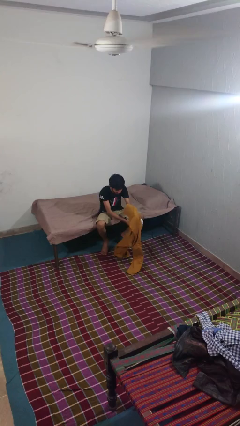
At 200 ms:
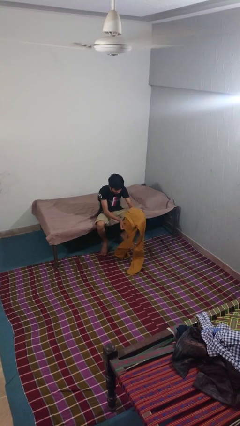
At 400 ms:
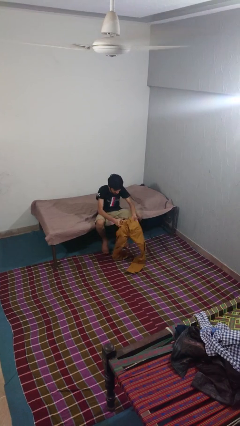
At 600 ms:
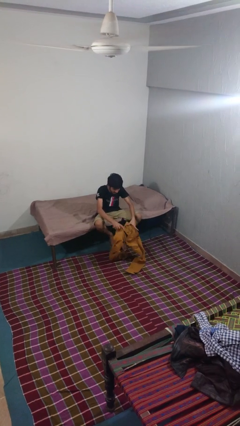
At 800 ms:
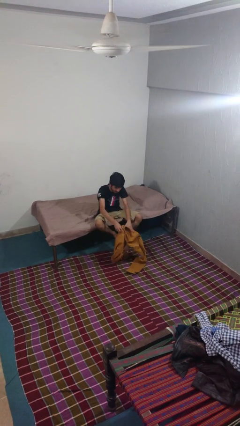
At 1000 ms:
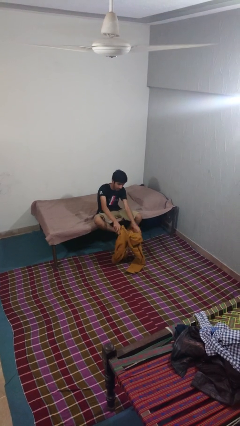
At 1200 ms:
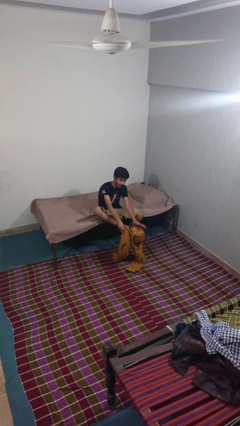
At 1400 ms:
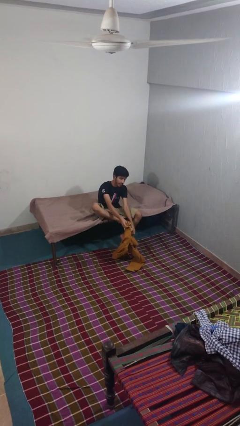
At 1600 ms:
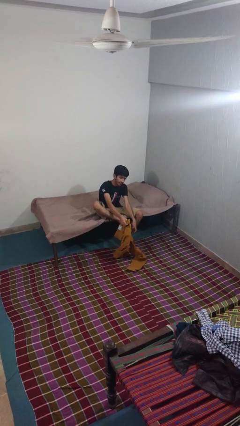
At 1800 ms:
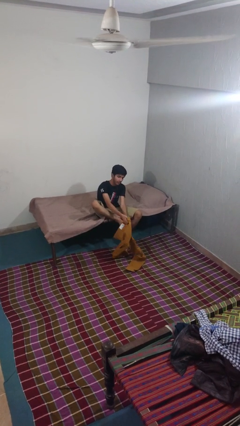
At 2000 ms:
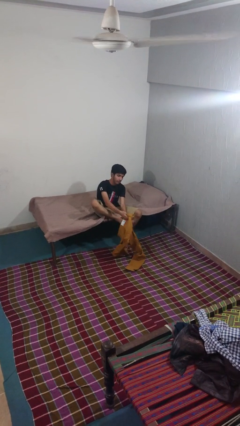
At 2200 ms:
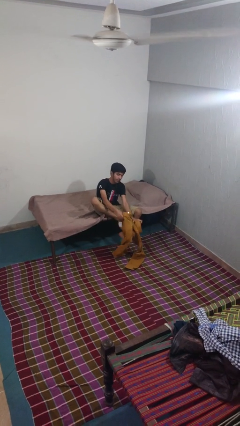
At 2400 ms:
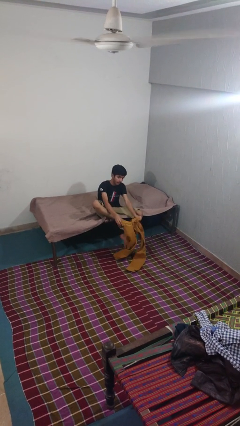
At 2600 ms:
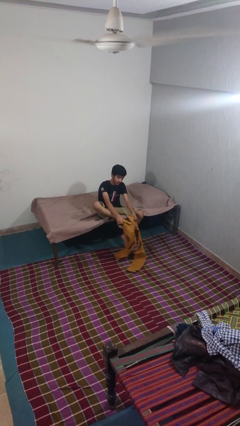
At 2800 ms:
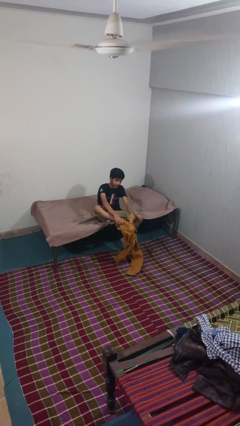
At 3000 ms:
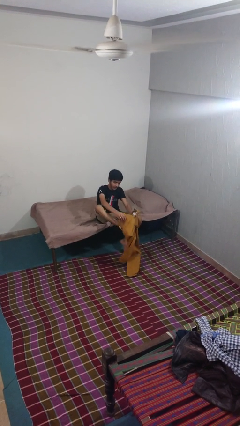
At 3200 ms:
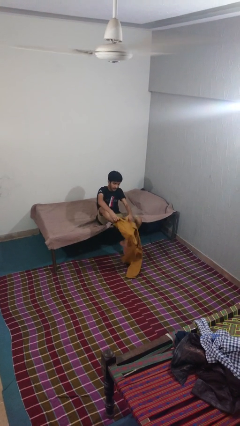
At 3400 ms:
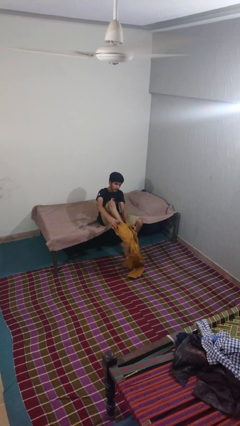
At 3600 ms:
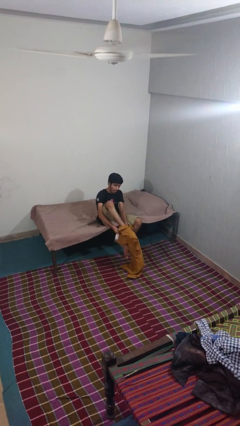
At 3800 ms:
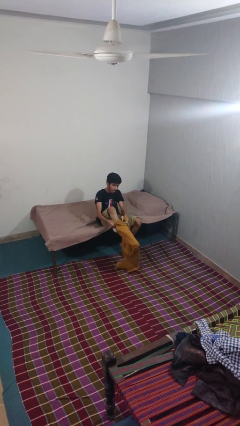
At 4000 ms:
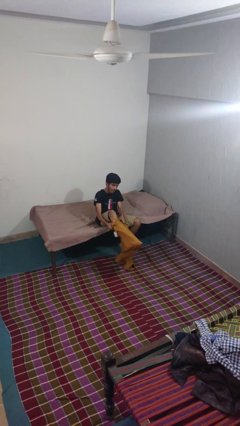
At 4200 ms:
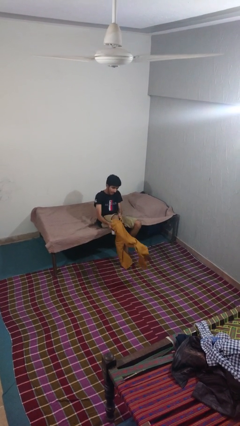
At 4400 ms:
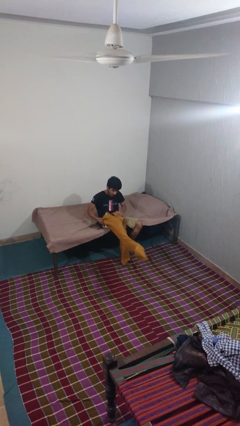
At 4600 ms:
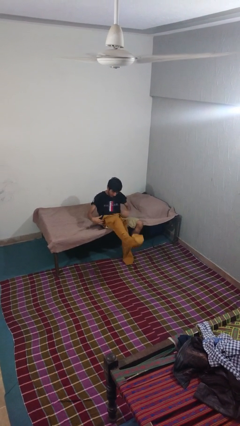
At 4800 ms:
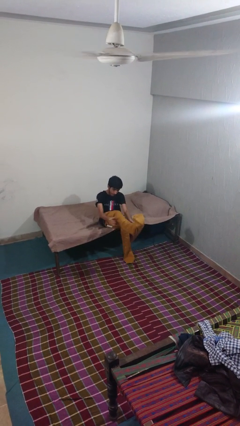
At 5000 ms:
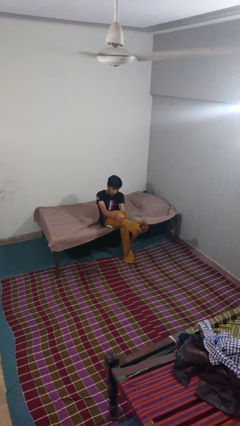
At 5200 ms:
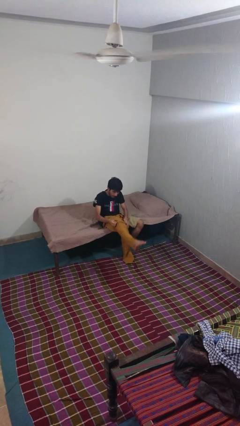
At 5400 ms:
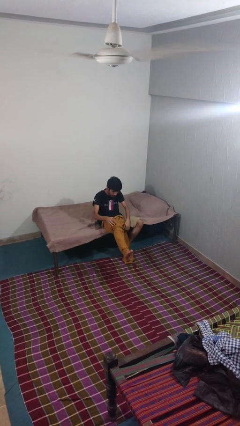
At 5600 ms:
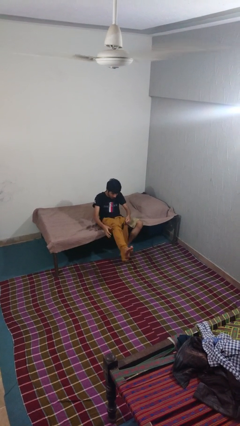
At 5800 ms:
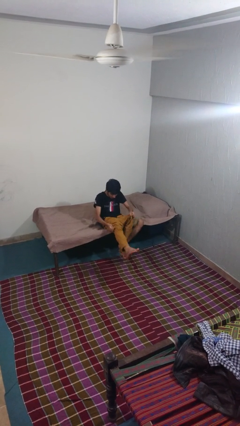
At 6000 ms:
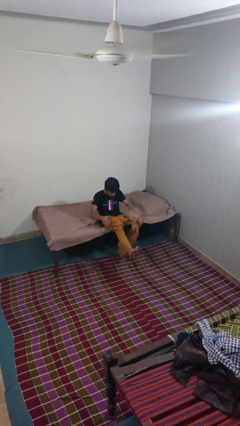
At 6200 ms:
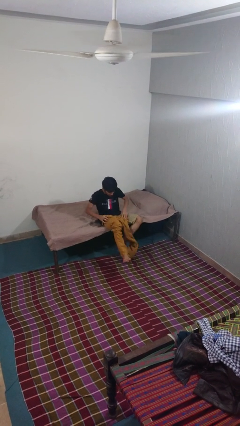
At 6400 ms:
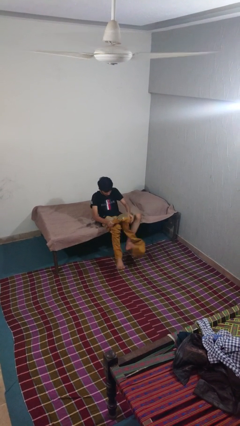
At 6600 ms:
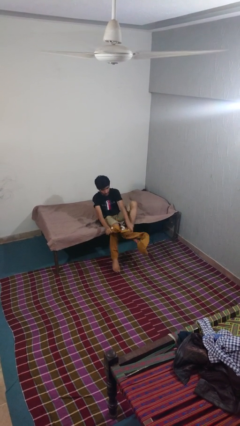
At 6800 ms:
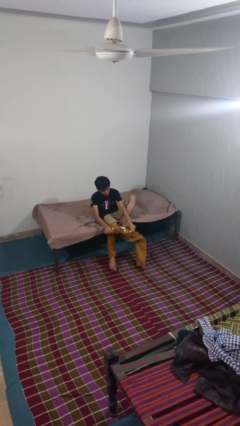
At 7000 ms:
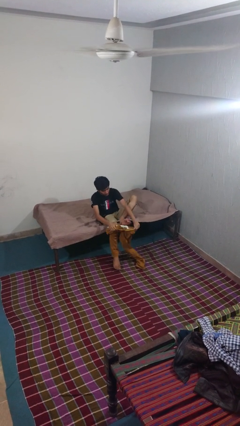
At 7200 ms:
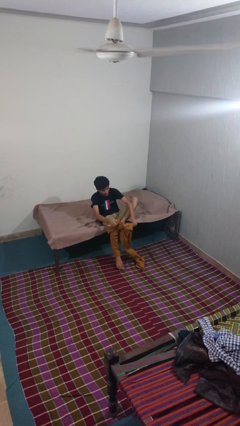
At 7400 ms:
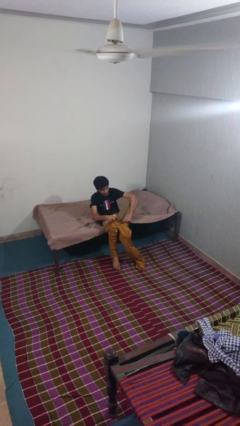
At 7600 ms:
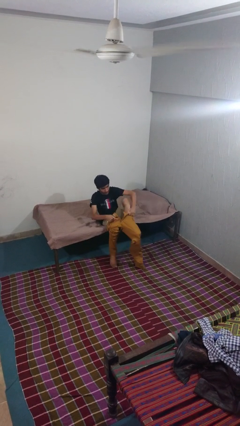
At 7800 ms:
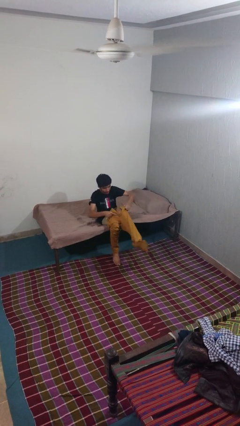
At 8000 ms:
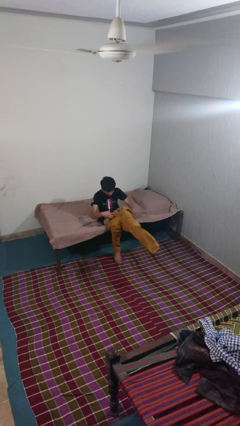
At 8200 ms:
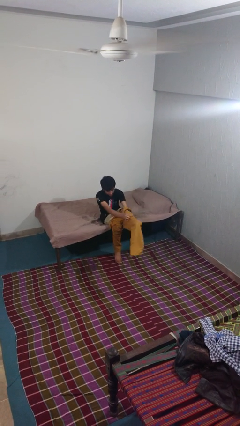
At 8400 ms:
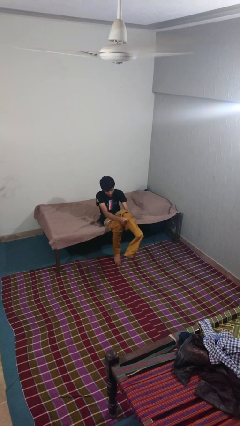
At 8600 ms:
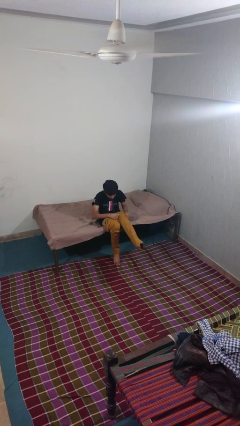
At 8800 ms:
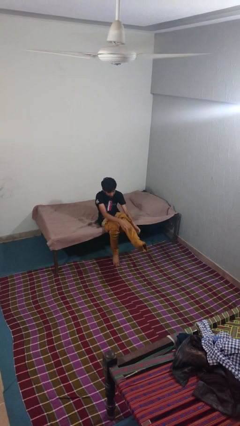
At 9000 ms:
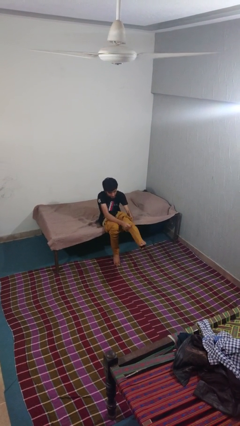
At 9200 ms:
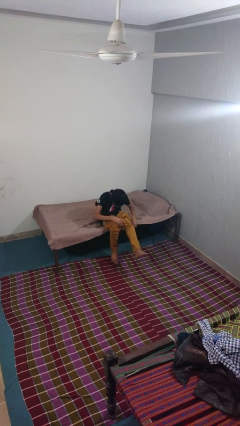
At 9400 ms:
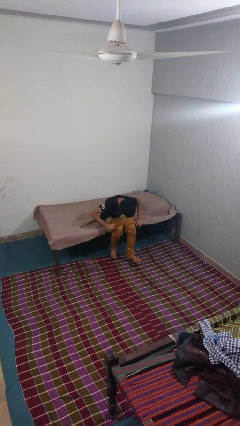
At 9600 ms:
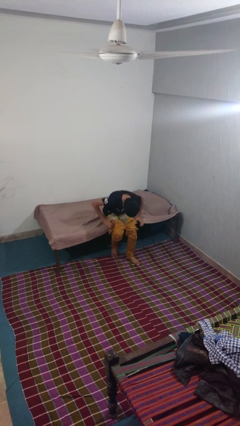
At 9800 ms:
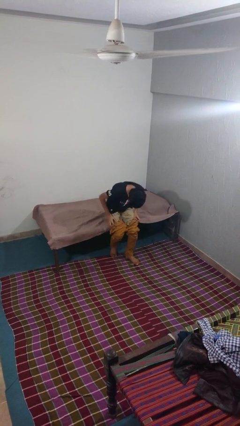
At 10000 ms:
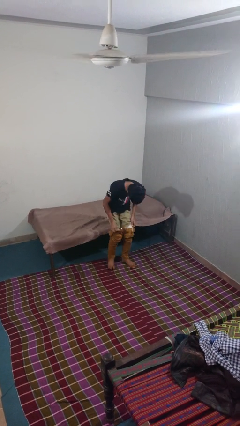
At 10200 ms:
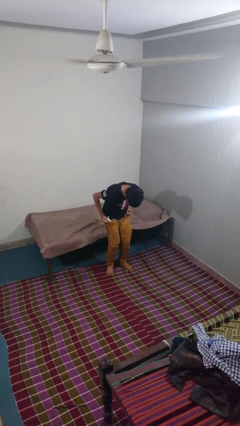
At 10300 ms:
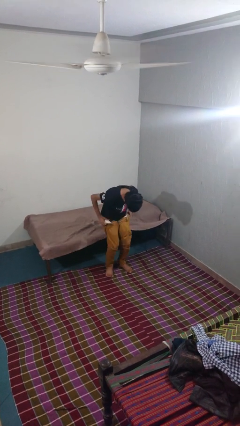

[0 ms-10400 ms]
person puts on pants

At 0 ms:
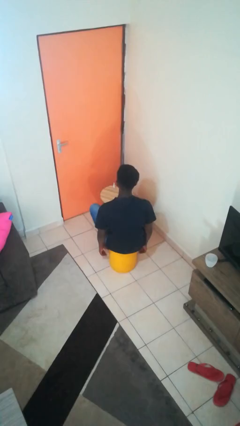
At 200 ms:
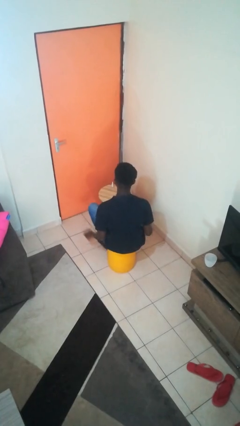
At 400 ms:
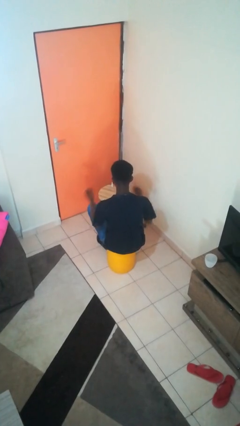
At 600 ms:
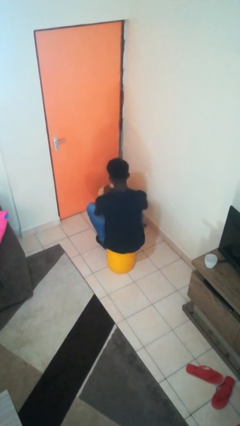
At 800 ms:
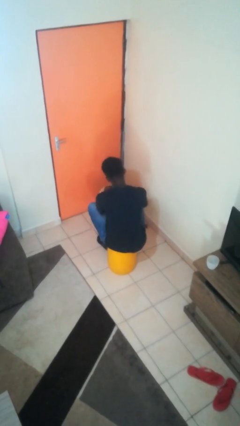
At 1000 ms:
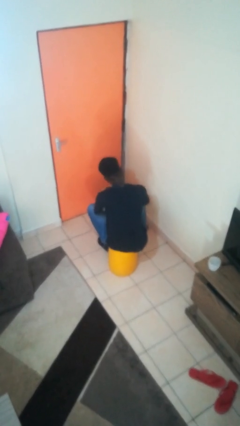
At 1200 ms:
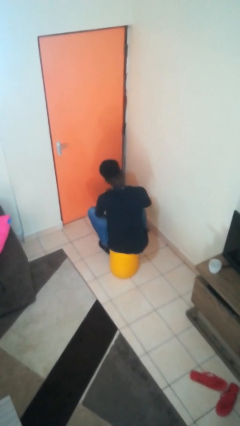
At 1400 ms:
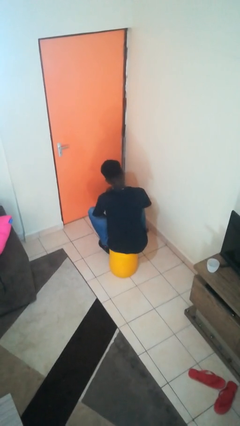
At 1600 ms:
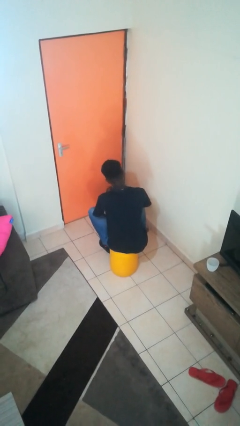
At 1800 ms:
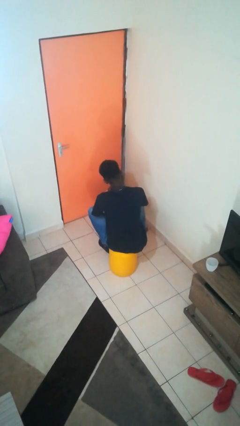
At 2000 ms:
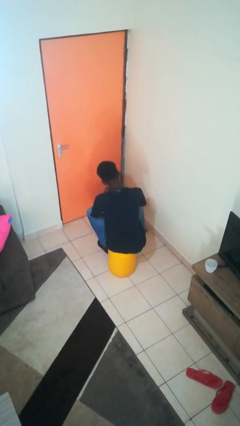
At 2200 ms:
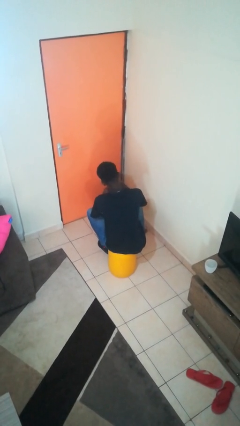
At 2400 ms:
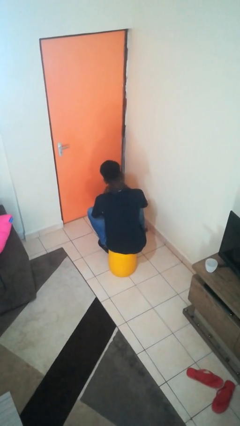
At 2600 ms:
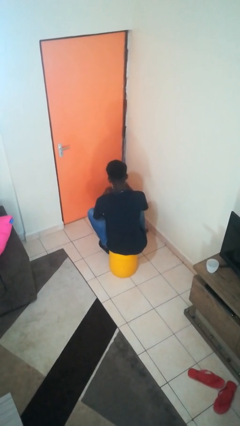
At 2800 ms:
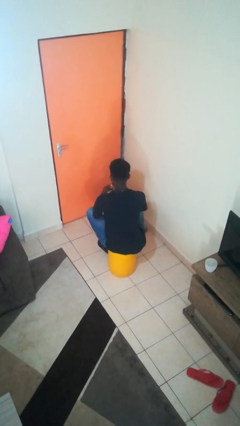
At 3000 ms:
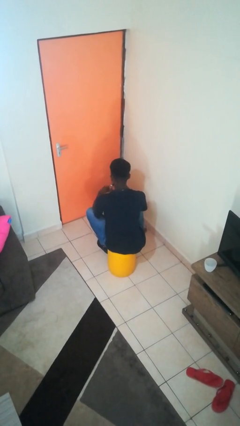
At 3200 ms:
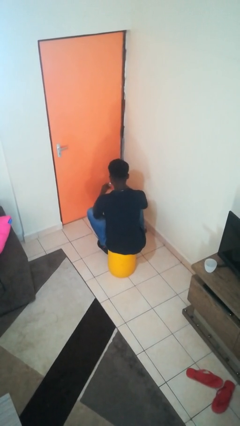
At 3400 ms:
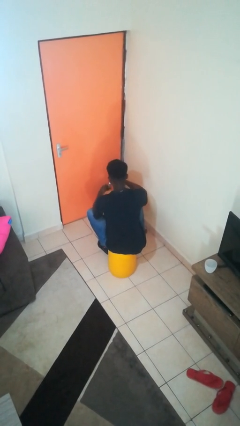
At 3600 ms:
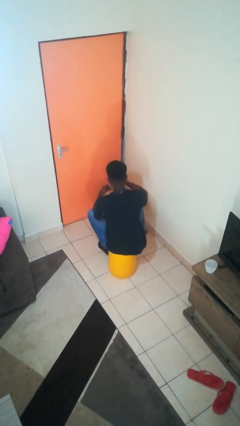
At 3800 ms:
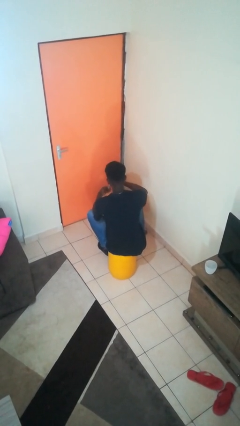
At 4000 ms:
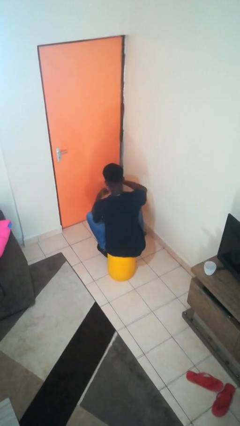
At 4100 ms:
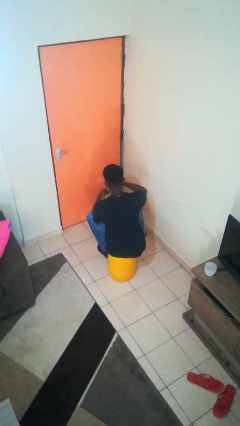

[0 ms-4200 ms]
person paints fingernails

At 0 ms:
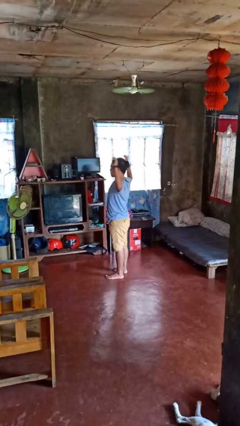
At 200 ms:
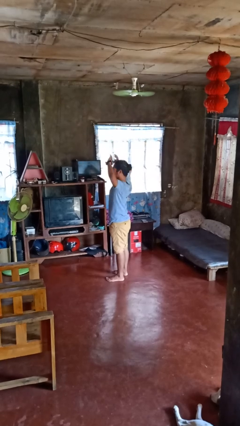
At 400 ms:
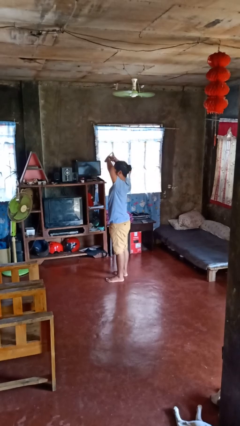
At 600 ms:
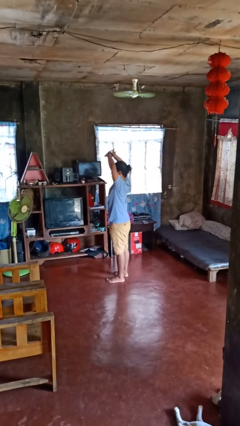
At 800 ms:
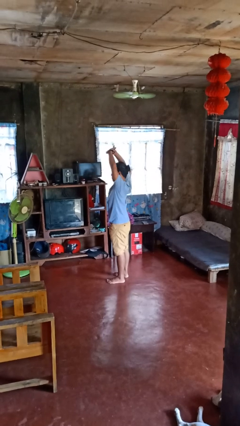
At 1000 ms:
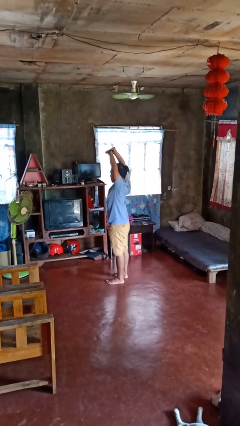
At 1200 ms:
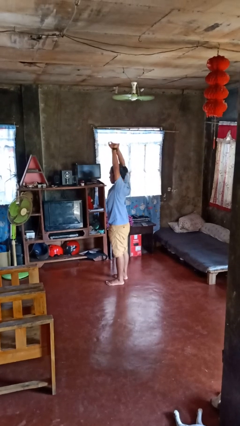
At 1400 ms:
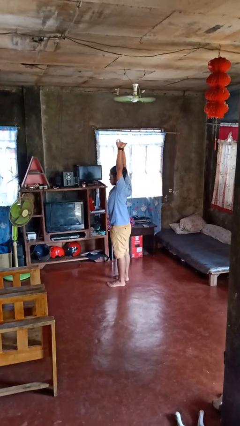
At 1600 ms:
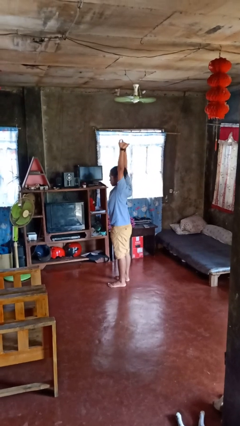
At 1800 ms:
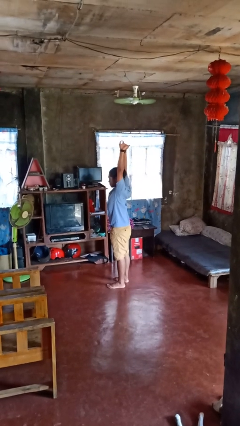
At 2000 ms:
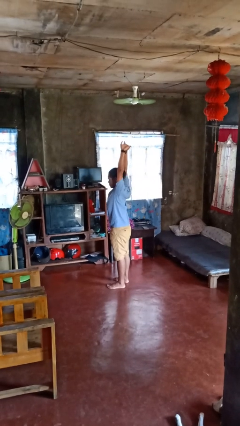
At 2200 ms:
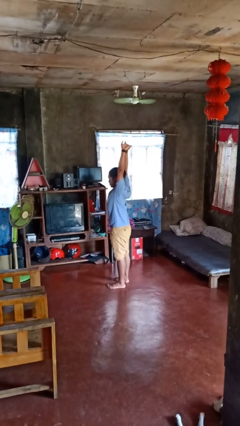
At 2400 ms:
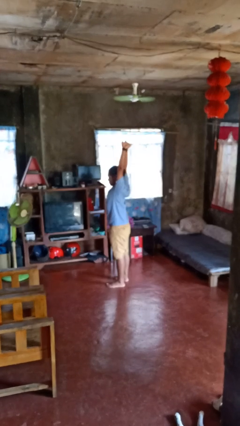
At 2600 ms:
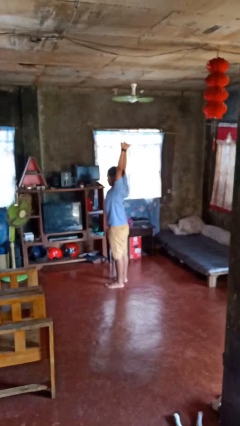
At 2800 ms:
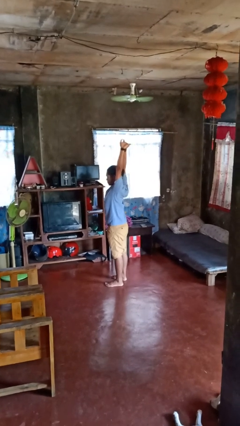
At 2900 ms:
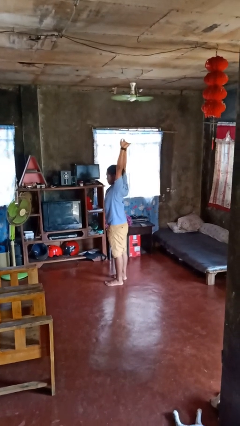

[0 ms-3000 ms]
person stretches arms over head
